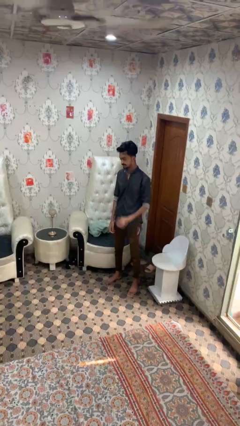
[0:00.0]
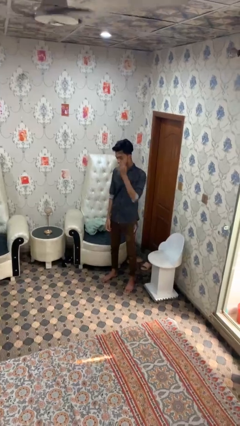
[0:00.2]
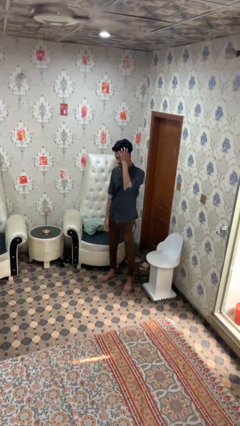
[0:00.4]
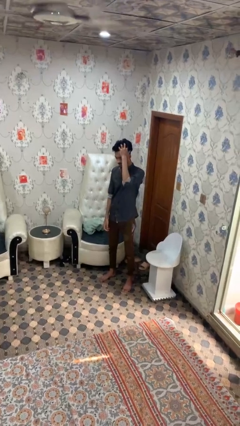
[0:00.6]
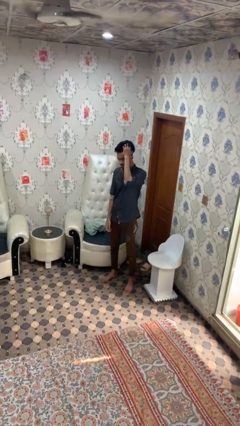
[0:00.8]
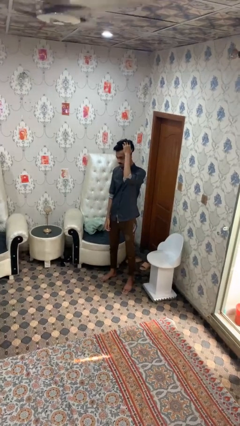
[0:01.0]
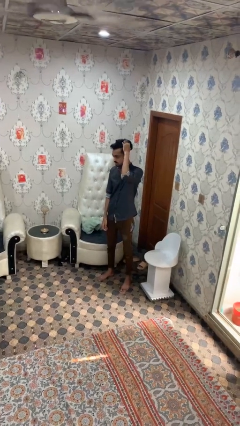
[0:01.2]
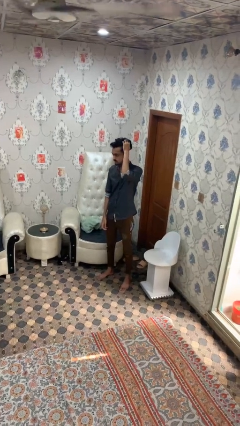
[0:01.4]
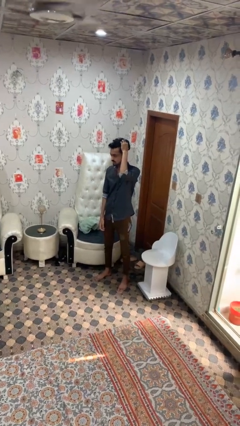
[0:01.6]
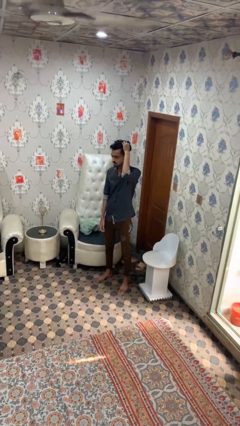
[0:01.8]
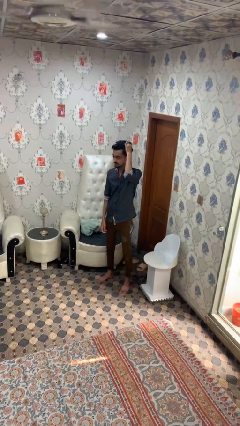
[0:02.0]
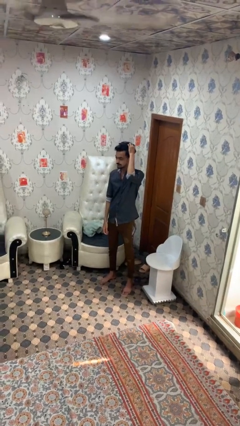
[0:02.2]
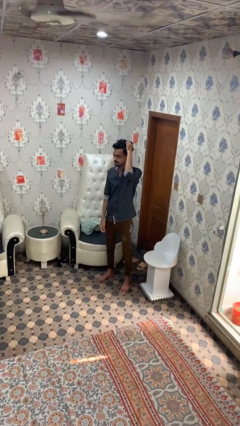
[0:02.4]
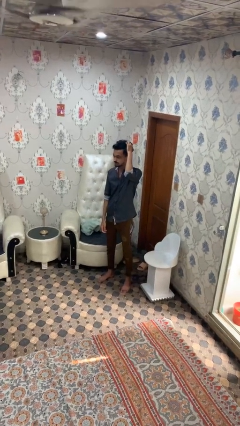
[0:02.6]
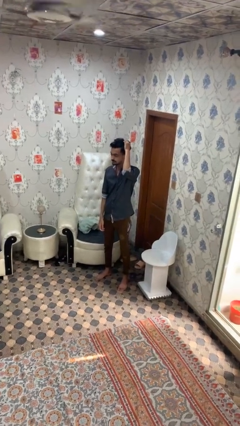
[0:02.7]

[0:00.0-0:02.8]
person strokes hair

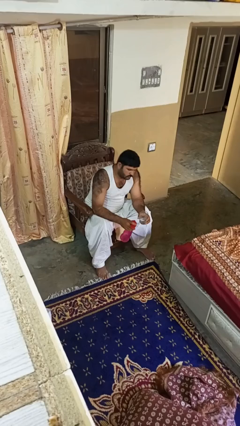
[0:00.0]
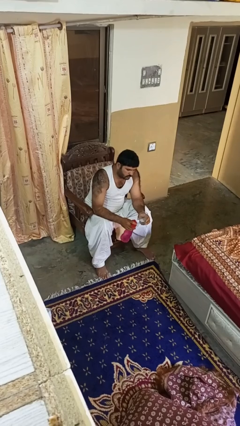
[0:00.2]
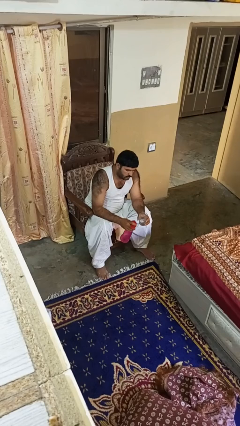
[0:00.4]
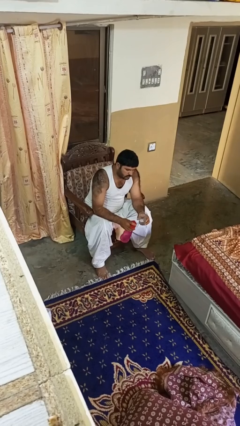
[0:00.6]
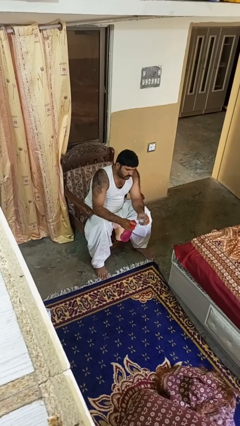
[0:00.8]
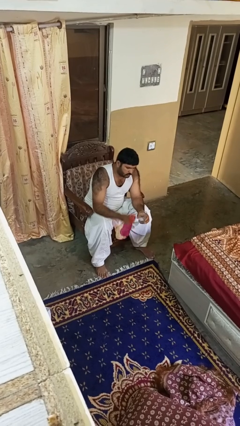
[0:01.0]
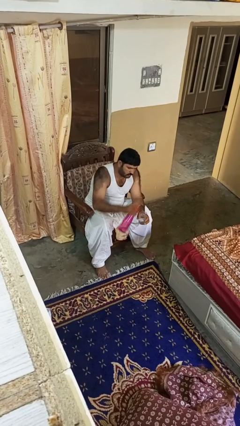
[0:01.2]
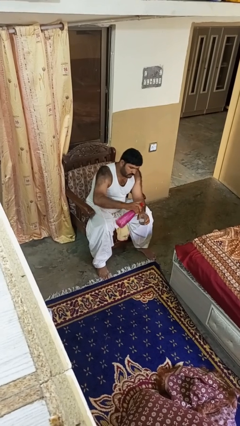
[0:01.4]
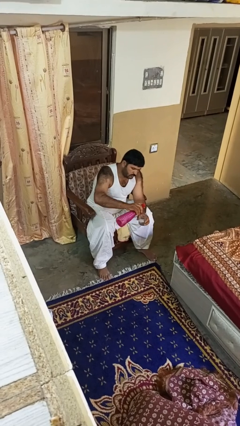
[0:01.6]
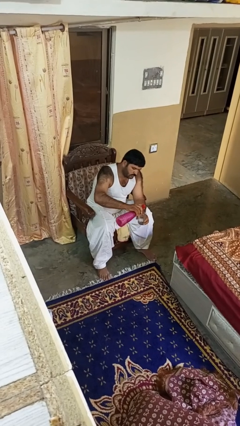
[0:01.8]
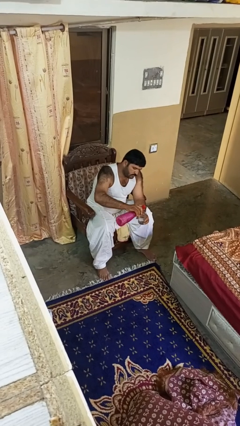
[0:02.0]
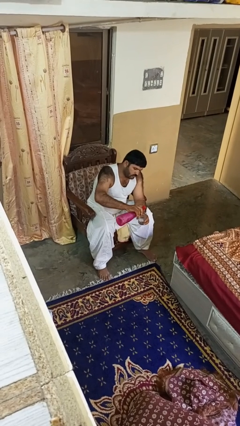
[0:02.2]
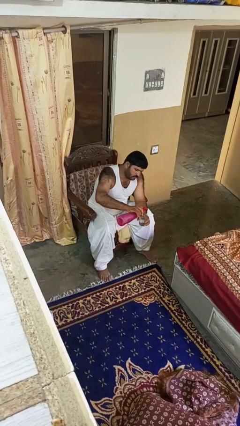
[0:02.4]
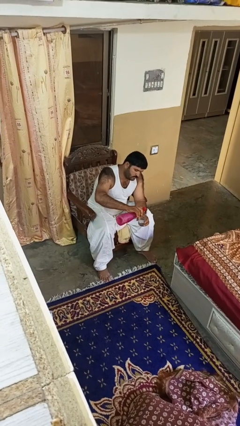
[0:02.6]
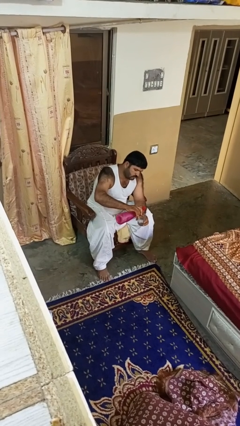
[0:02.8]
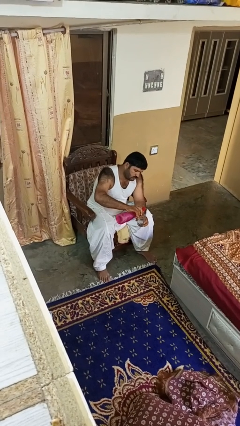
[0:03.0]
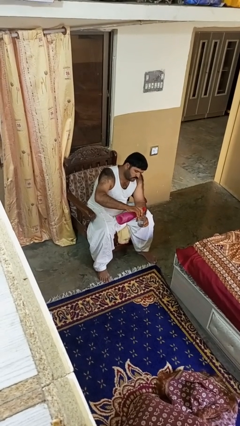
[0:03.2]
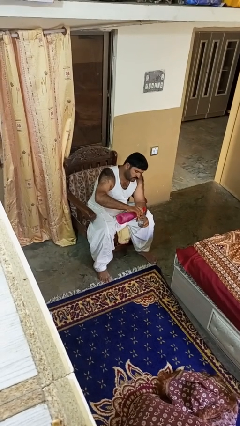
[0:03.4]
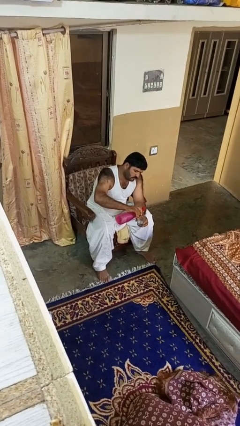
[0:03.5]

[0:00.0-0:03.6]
person pours liquid into cup

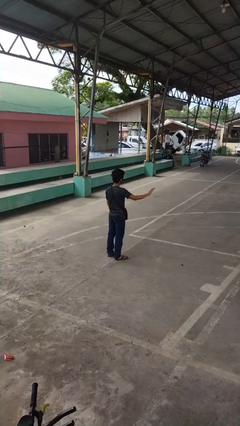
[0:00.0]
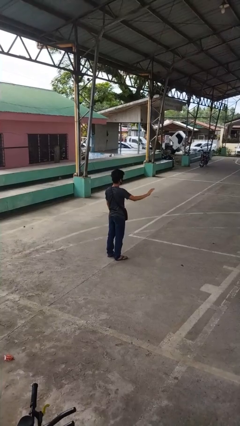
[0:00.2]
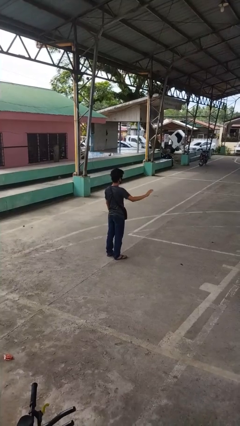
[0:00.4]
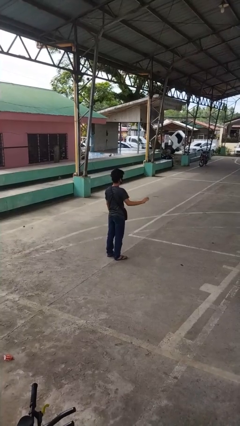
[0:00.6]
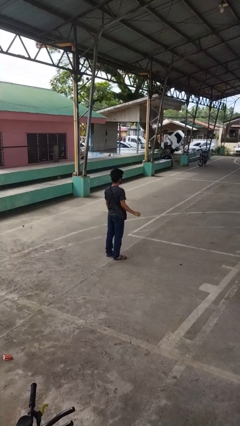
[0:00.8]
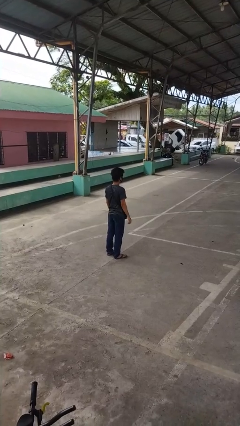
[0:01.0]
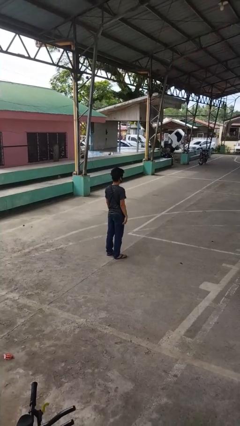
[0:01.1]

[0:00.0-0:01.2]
person gestures swipe right

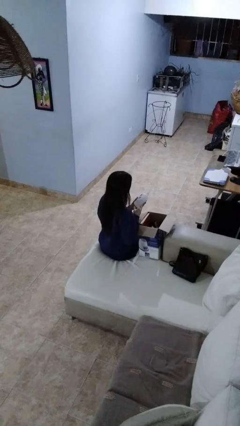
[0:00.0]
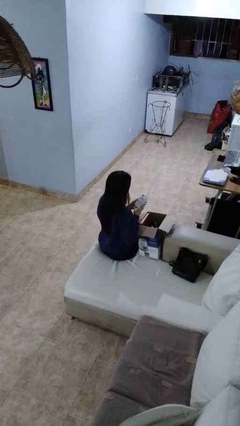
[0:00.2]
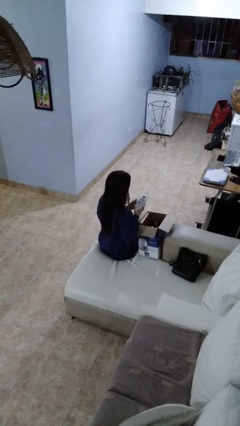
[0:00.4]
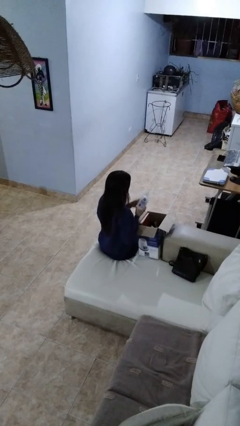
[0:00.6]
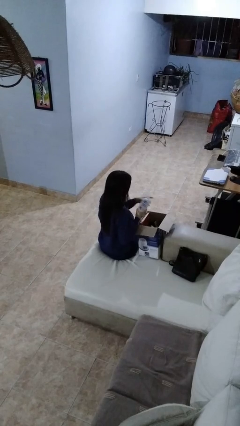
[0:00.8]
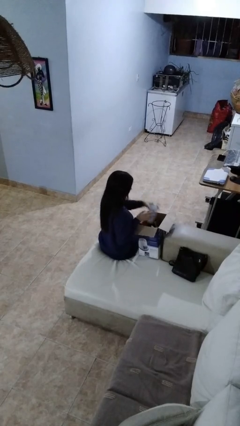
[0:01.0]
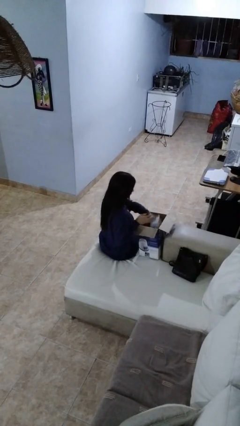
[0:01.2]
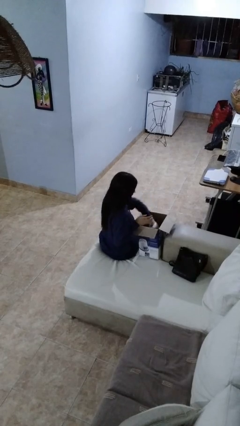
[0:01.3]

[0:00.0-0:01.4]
person puts object into box

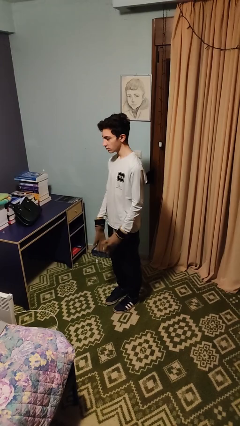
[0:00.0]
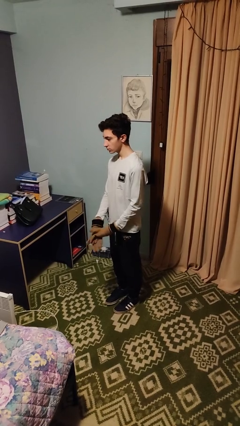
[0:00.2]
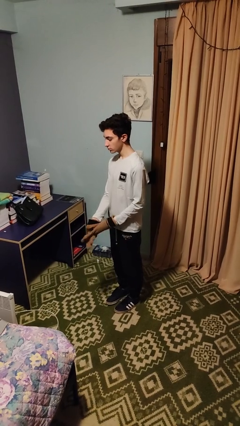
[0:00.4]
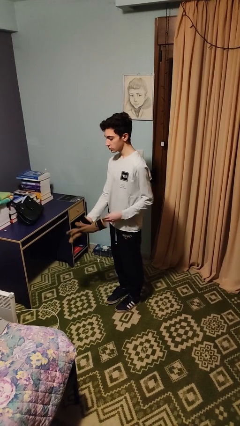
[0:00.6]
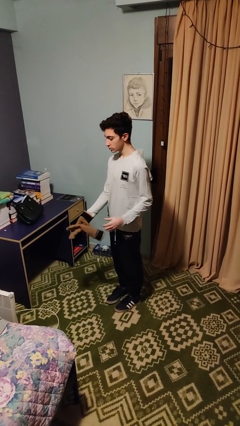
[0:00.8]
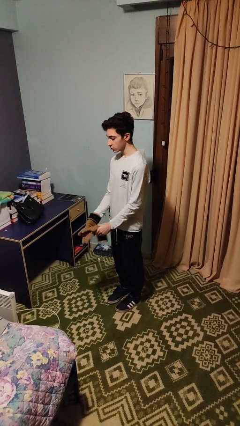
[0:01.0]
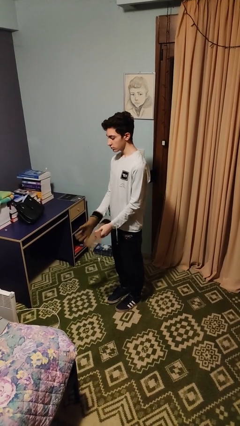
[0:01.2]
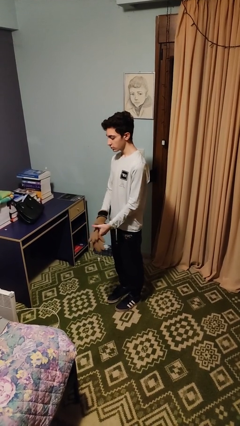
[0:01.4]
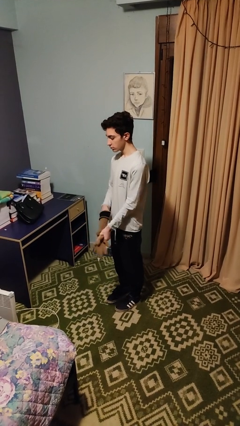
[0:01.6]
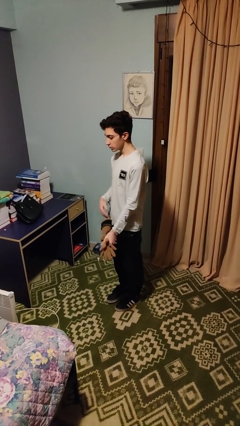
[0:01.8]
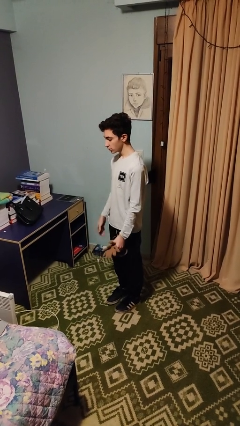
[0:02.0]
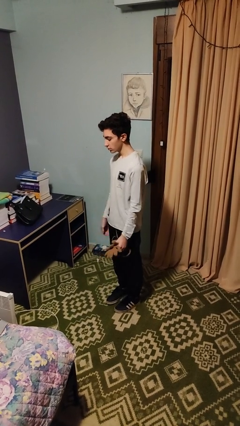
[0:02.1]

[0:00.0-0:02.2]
person takes off gloves

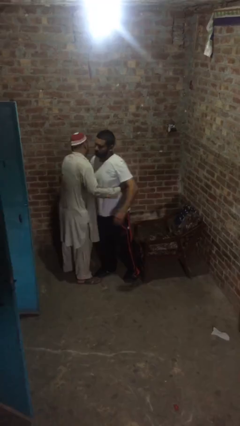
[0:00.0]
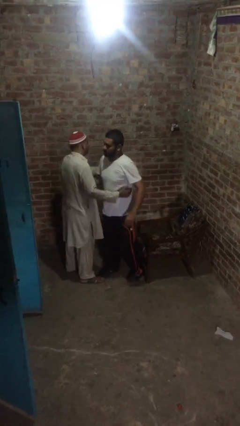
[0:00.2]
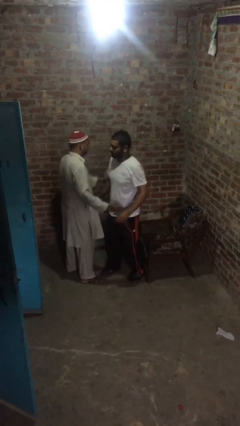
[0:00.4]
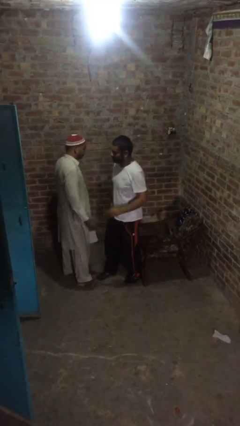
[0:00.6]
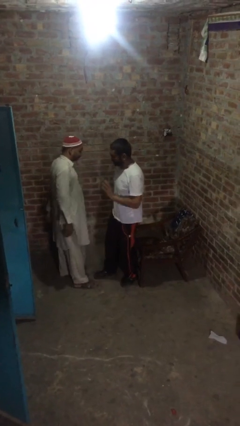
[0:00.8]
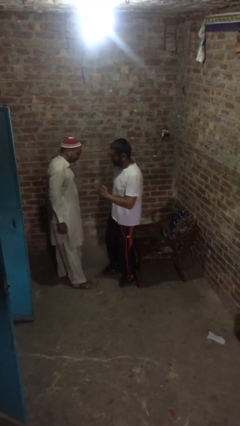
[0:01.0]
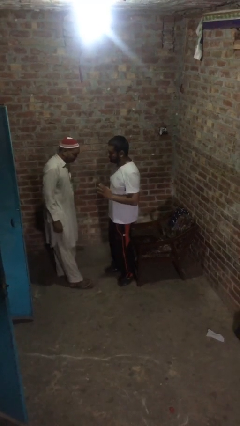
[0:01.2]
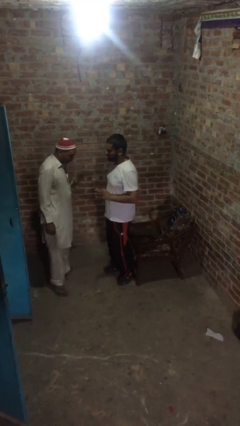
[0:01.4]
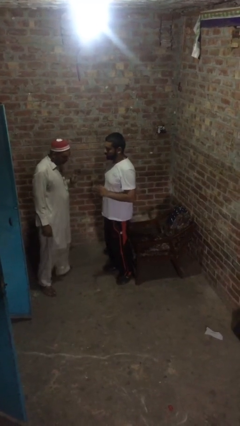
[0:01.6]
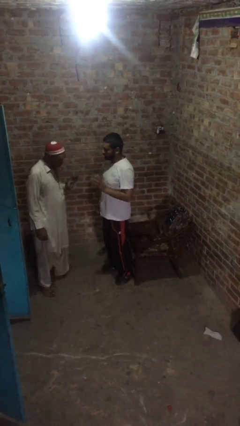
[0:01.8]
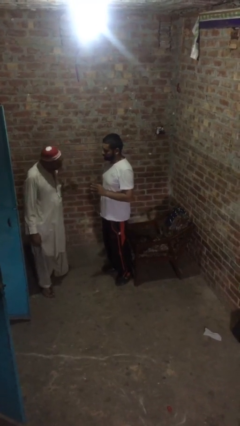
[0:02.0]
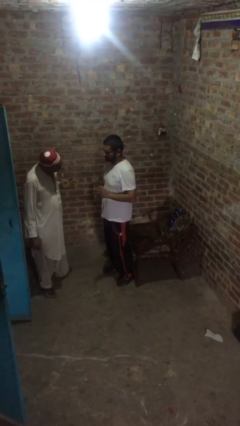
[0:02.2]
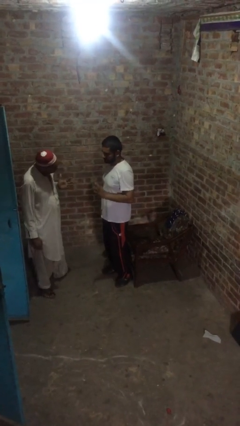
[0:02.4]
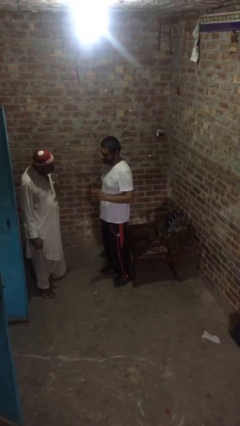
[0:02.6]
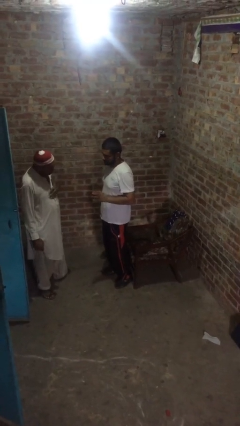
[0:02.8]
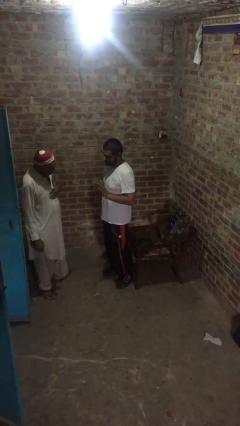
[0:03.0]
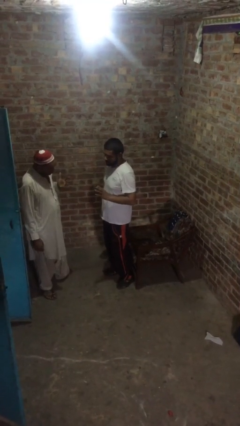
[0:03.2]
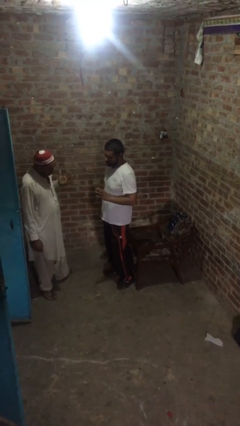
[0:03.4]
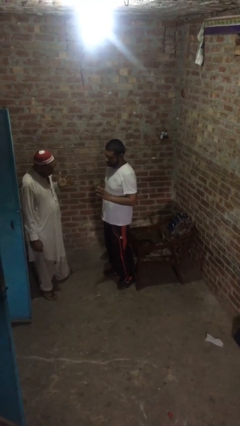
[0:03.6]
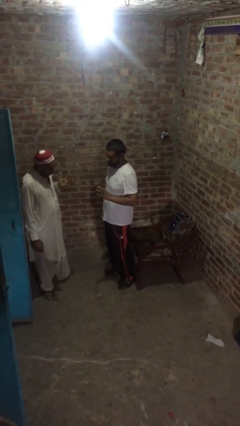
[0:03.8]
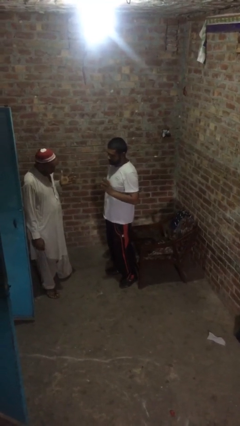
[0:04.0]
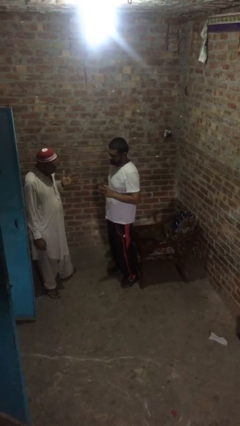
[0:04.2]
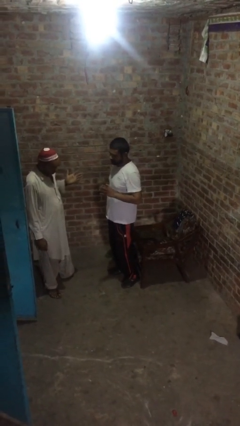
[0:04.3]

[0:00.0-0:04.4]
person talks to person

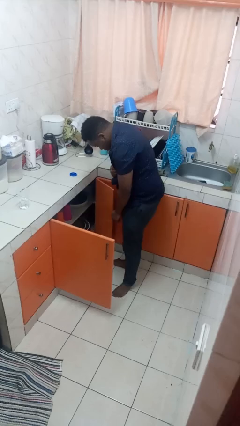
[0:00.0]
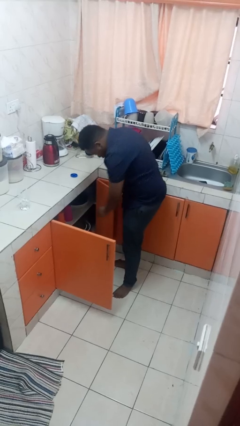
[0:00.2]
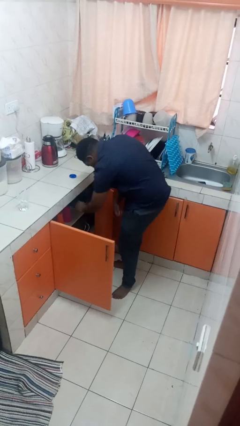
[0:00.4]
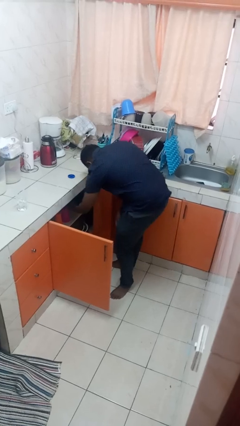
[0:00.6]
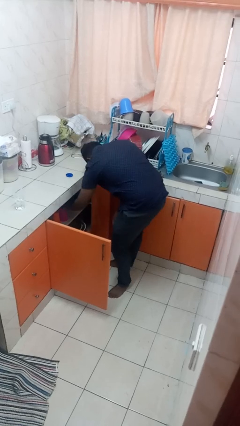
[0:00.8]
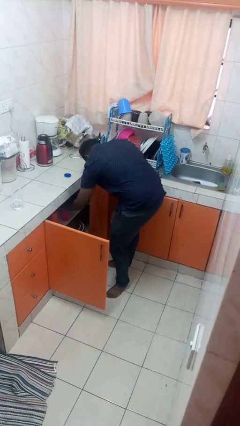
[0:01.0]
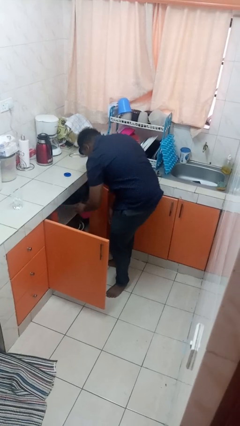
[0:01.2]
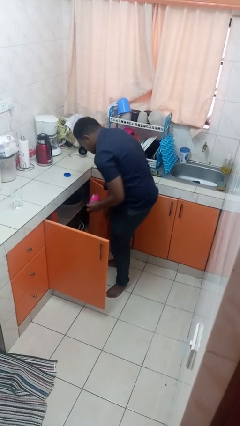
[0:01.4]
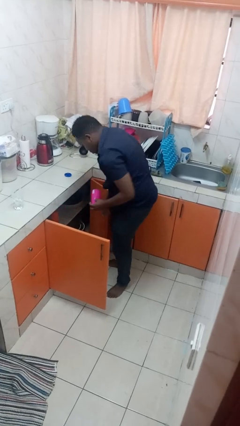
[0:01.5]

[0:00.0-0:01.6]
person takes object from cabinet
